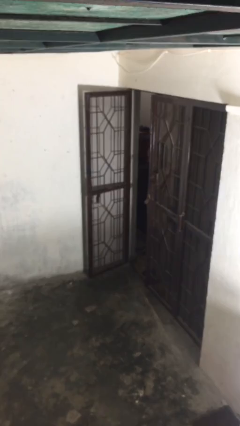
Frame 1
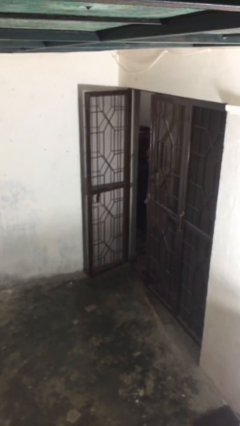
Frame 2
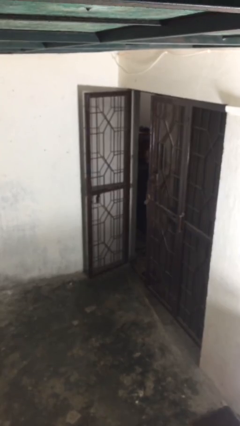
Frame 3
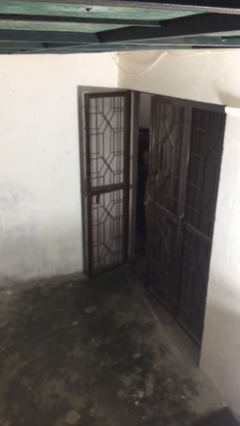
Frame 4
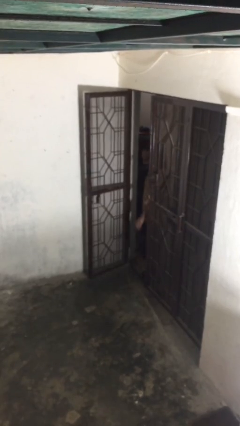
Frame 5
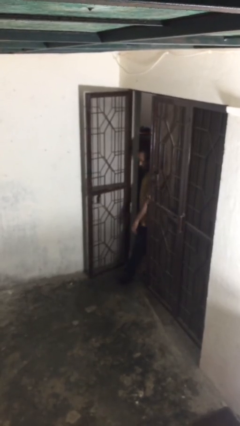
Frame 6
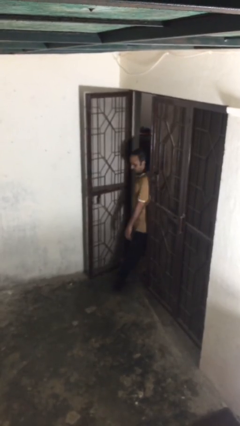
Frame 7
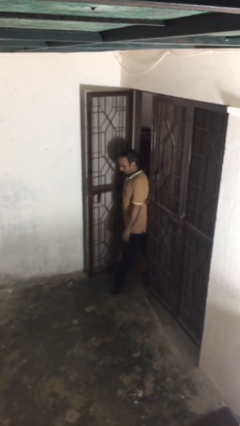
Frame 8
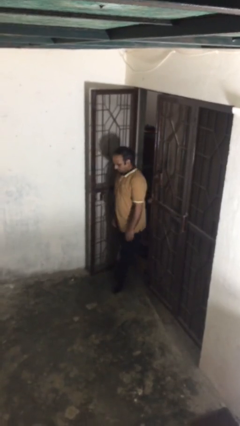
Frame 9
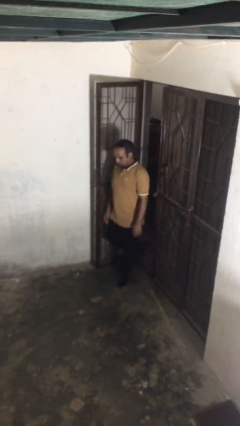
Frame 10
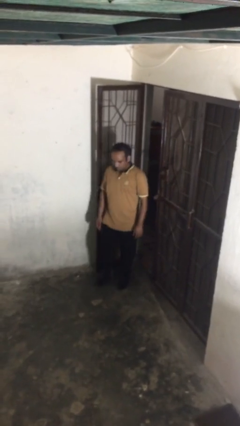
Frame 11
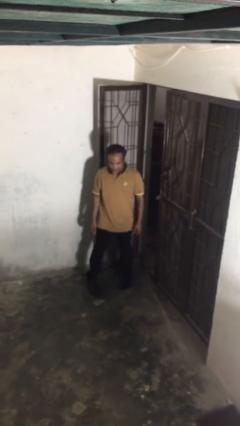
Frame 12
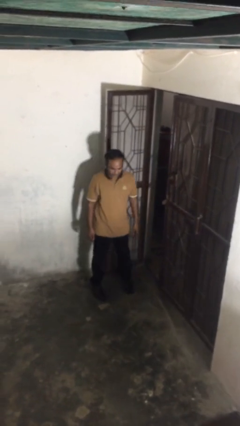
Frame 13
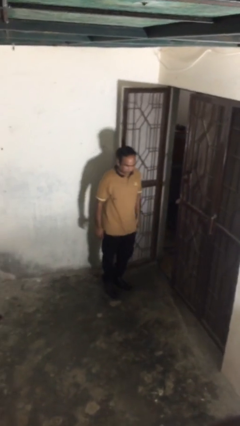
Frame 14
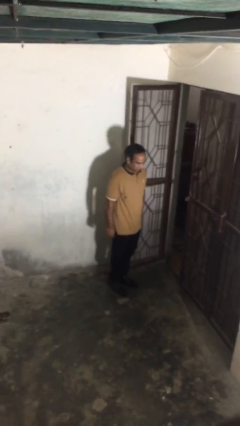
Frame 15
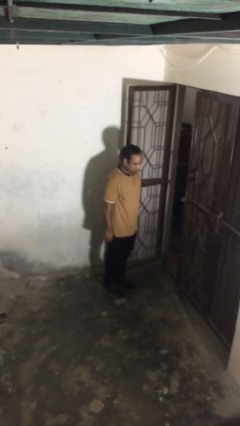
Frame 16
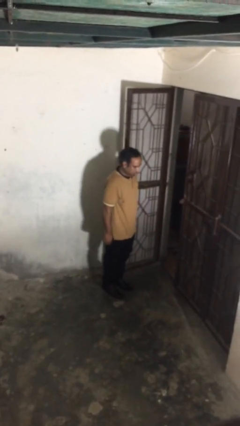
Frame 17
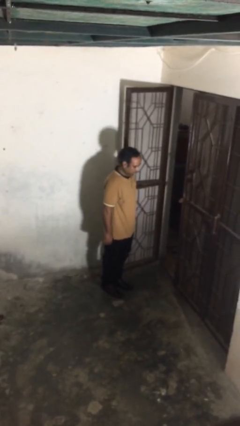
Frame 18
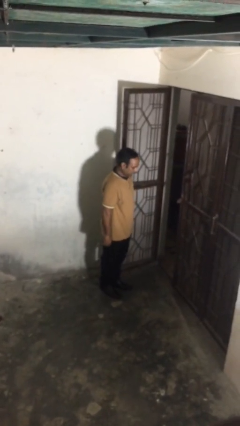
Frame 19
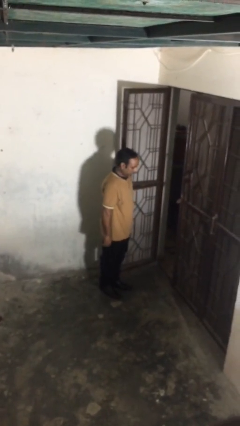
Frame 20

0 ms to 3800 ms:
person enters scene through structure

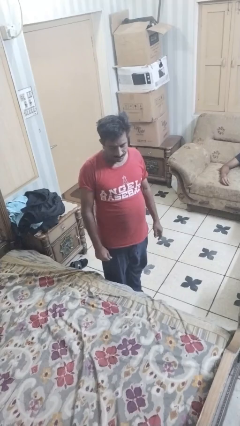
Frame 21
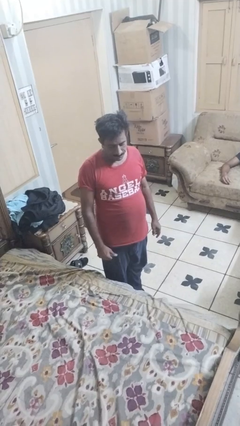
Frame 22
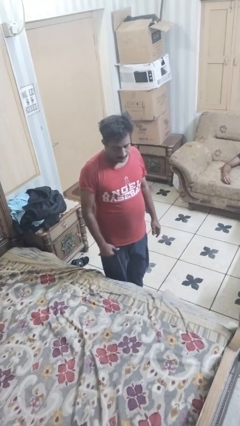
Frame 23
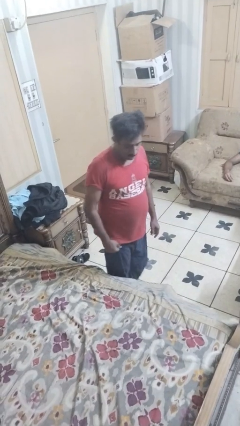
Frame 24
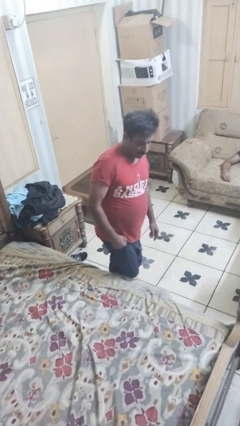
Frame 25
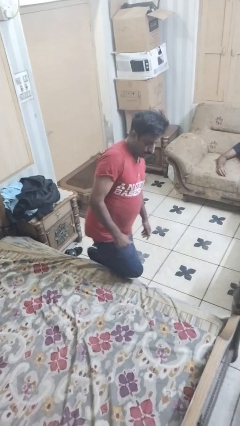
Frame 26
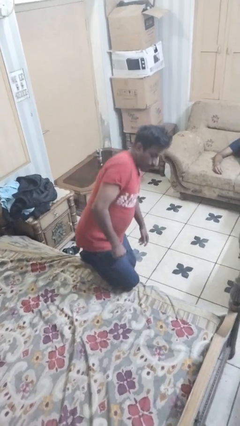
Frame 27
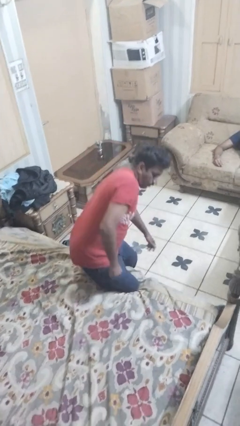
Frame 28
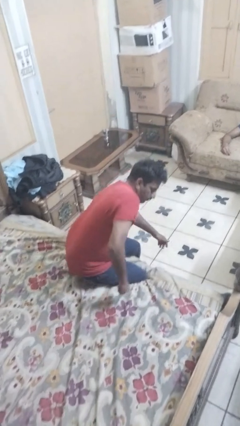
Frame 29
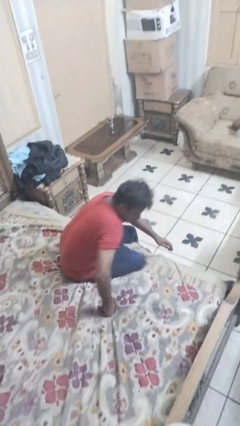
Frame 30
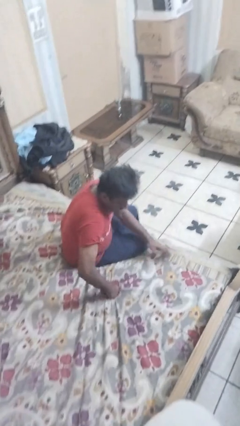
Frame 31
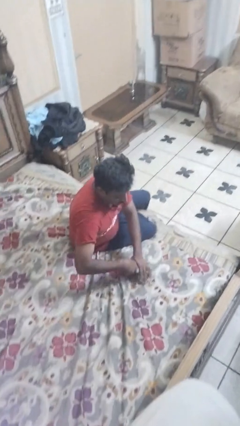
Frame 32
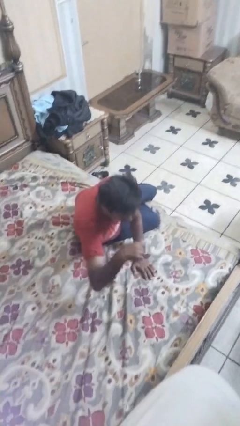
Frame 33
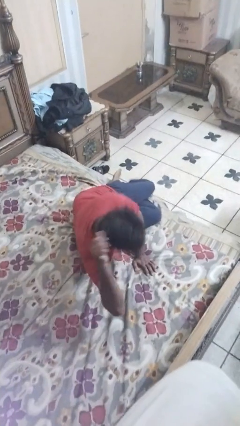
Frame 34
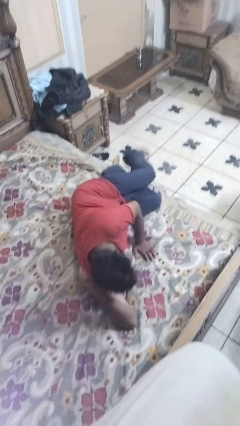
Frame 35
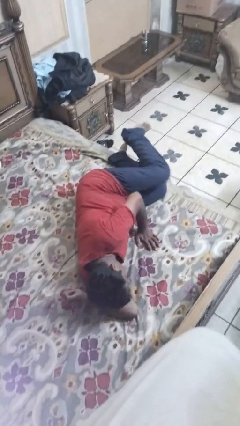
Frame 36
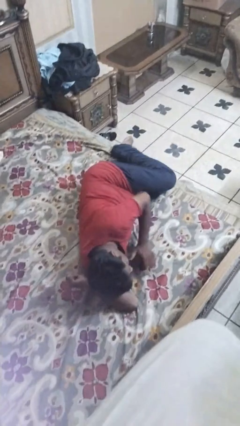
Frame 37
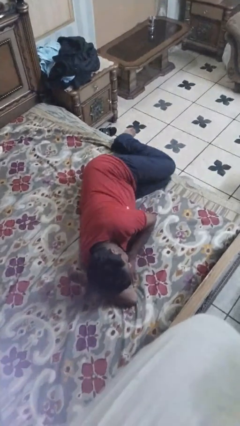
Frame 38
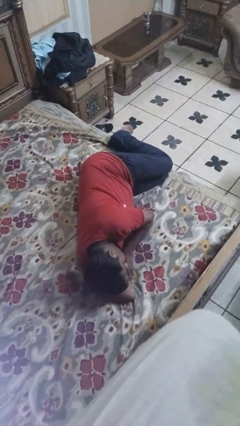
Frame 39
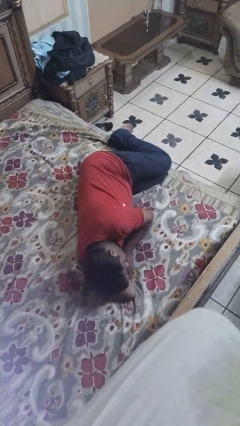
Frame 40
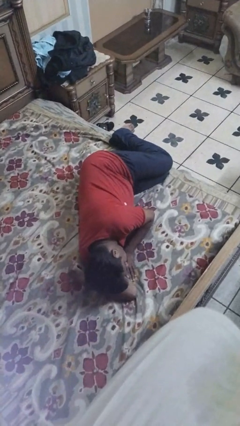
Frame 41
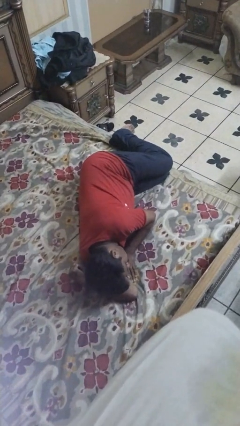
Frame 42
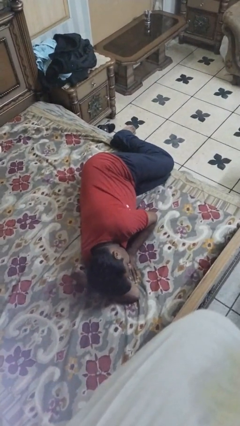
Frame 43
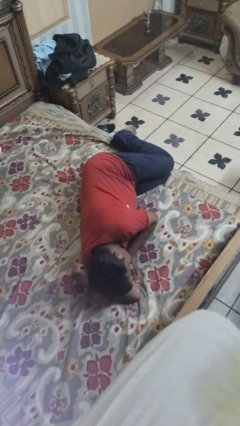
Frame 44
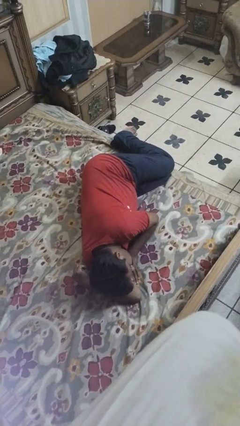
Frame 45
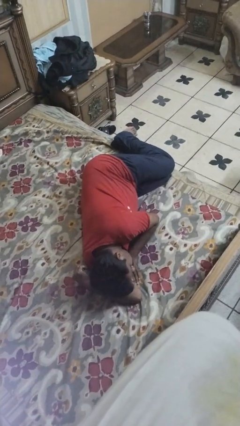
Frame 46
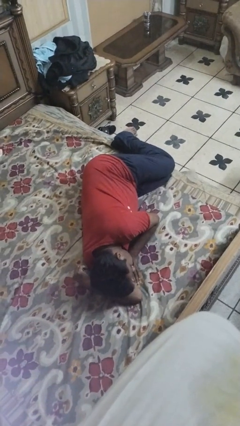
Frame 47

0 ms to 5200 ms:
person lies down on bed

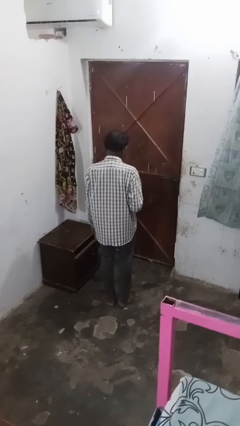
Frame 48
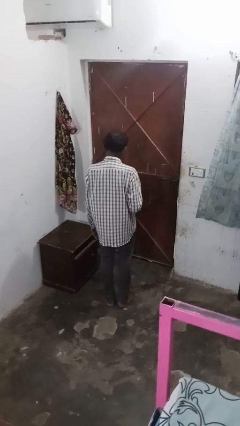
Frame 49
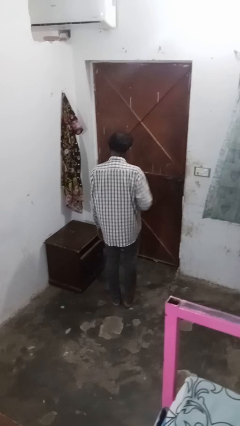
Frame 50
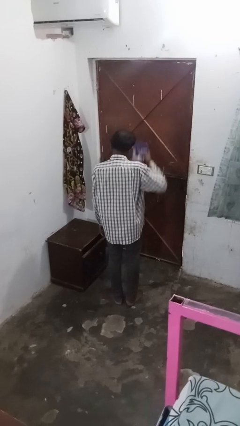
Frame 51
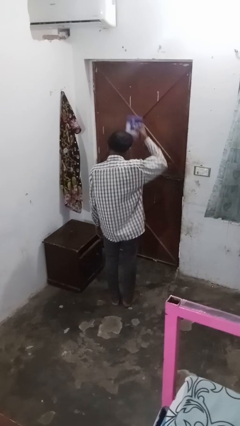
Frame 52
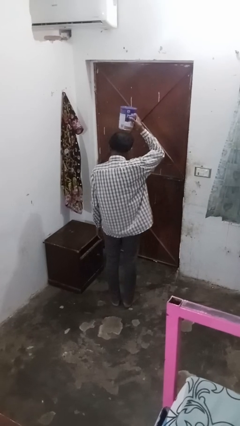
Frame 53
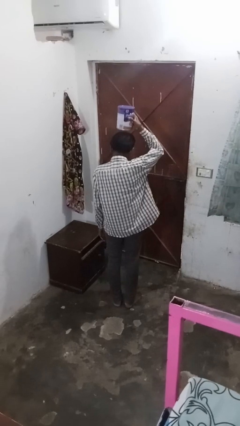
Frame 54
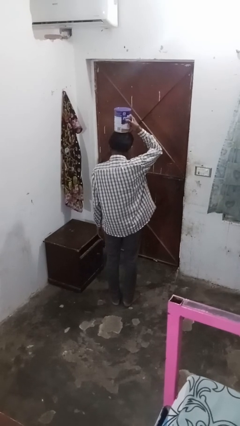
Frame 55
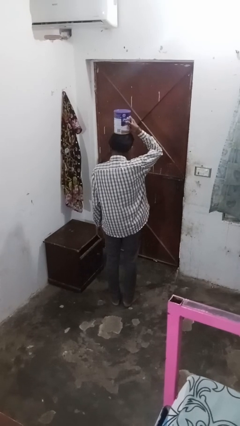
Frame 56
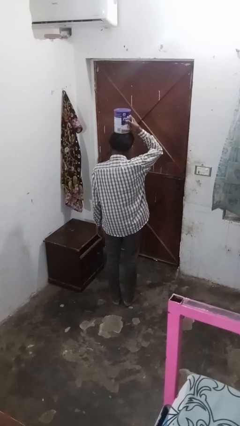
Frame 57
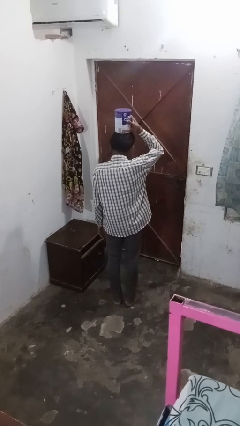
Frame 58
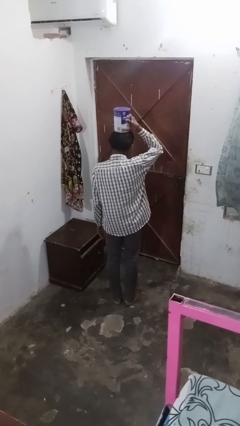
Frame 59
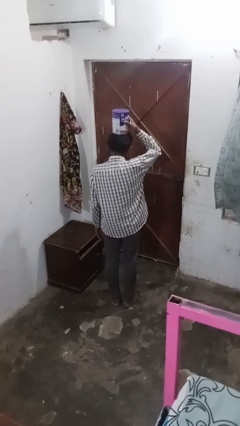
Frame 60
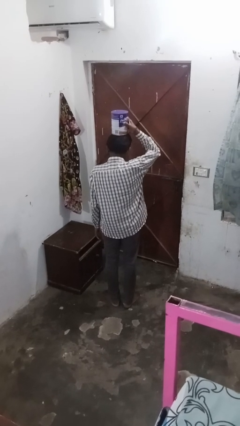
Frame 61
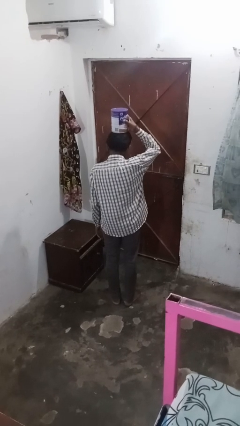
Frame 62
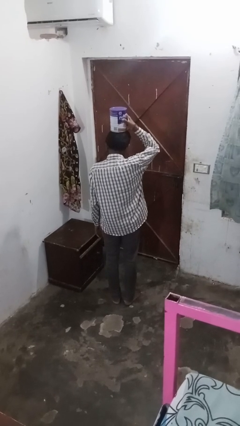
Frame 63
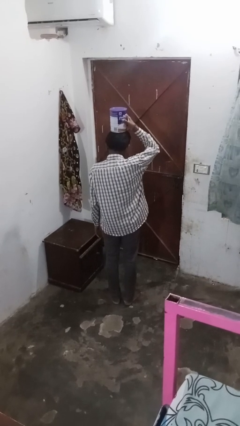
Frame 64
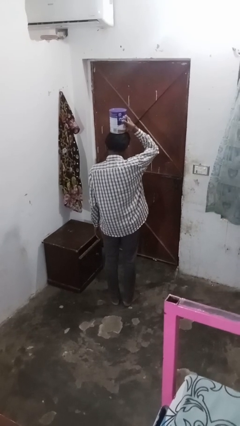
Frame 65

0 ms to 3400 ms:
person holds object above head

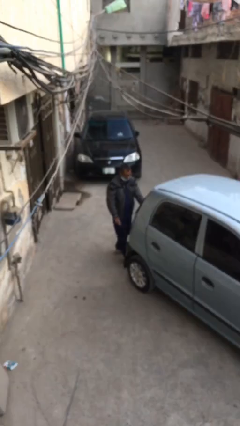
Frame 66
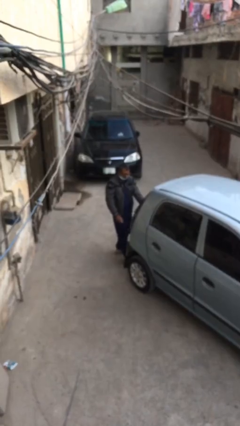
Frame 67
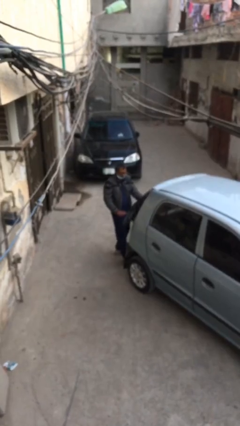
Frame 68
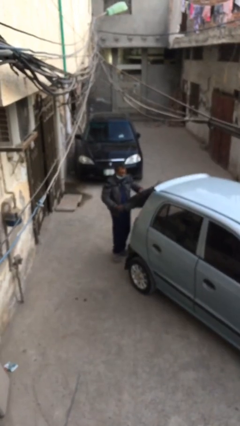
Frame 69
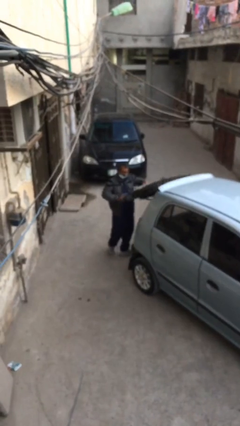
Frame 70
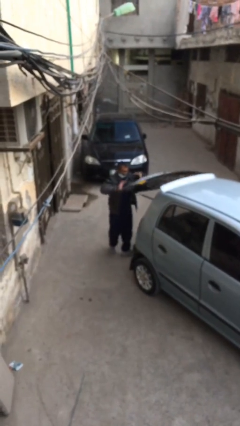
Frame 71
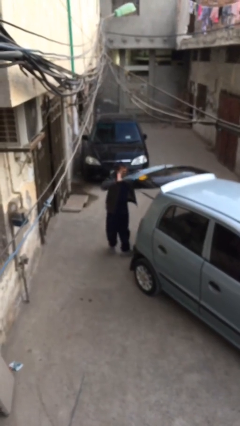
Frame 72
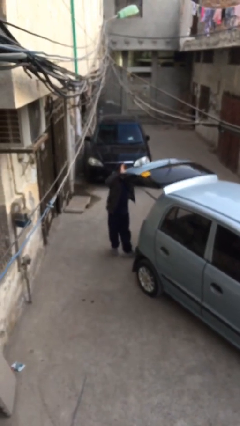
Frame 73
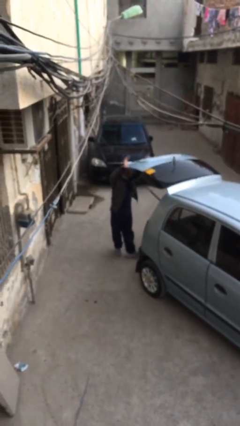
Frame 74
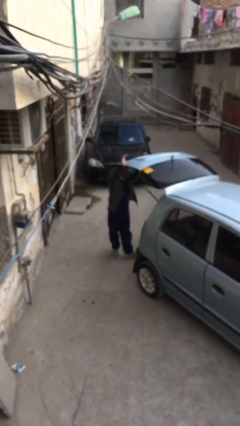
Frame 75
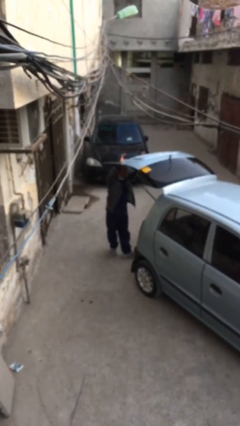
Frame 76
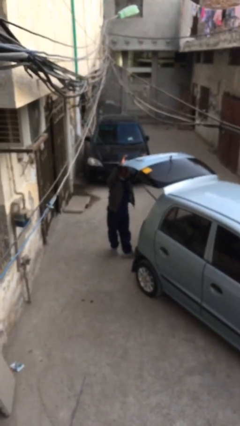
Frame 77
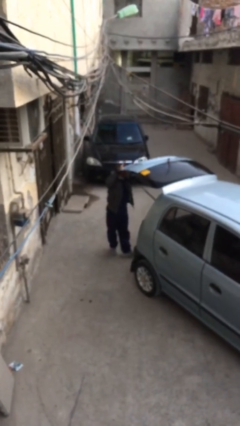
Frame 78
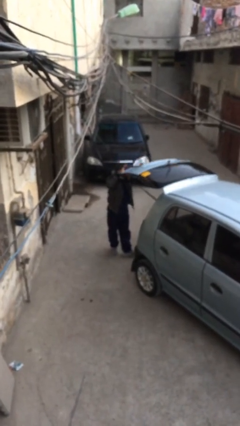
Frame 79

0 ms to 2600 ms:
person opens car trunk

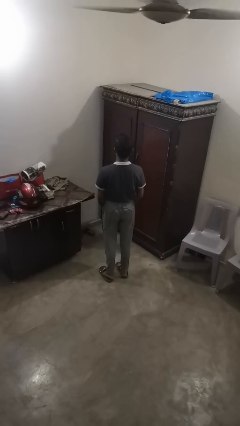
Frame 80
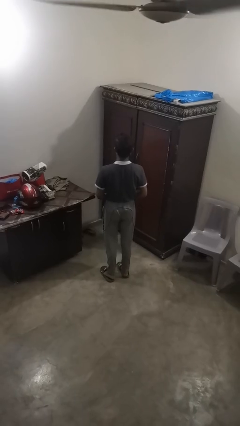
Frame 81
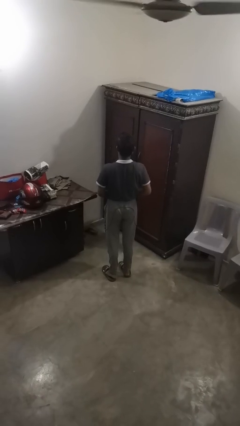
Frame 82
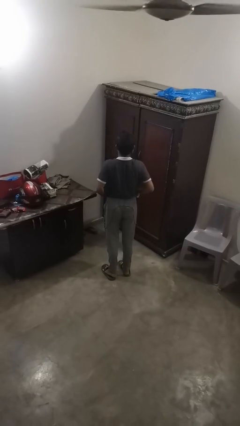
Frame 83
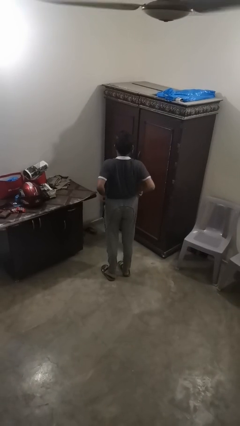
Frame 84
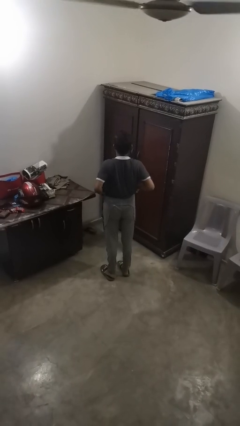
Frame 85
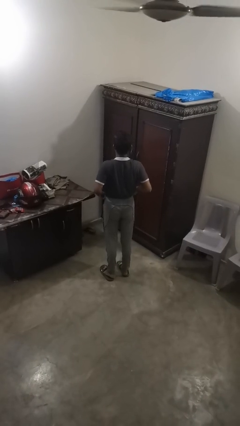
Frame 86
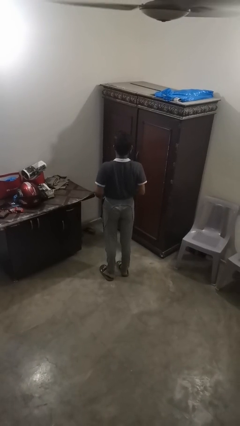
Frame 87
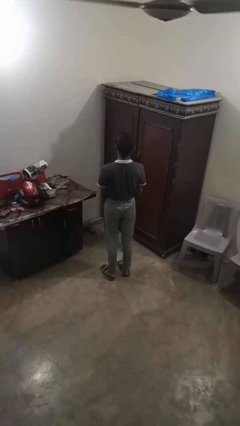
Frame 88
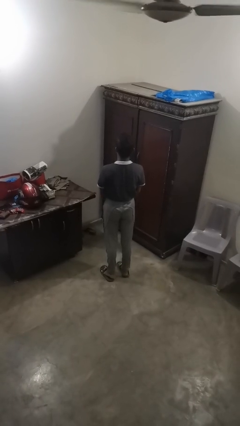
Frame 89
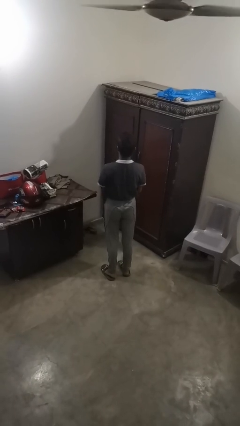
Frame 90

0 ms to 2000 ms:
person hikes up pants
